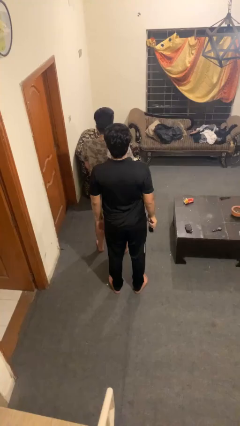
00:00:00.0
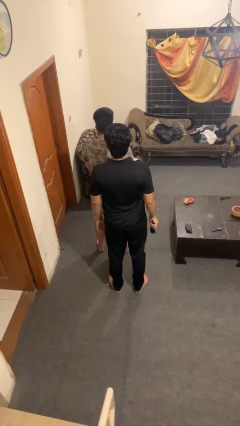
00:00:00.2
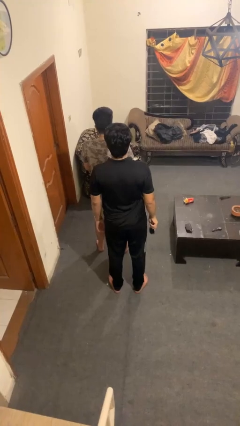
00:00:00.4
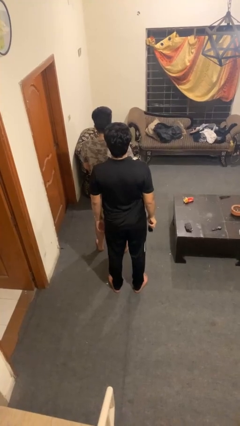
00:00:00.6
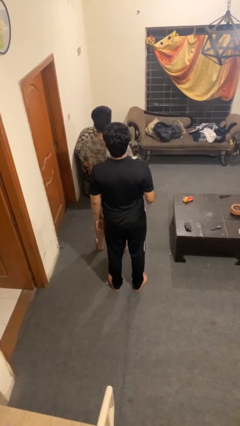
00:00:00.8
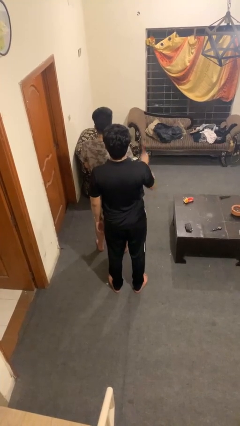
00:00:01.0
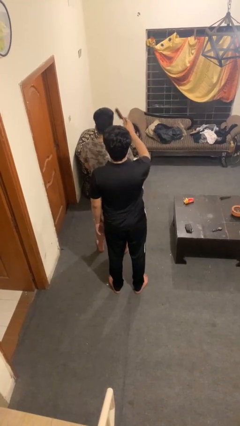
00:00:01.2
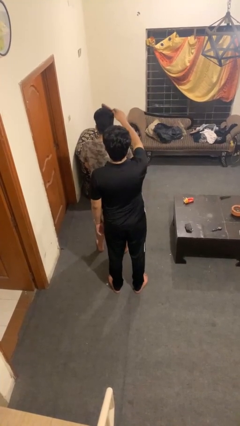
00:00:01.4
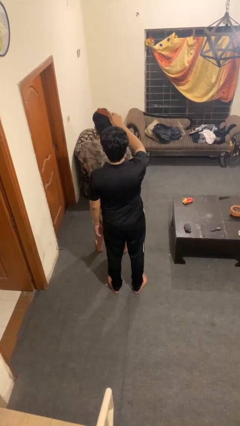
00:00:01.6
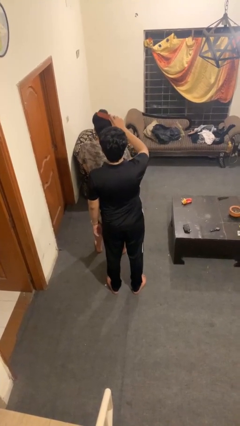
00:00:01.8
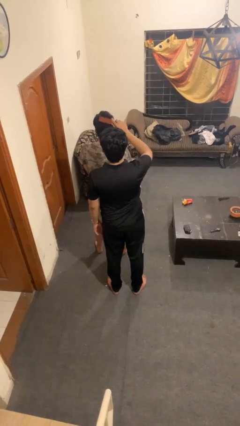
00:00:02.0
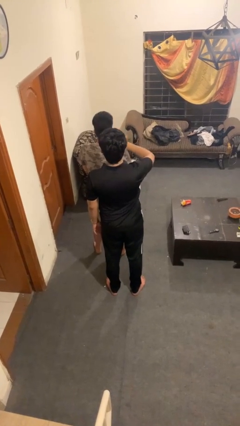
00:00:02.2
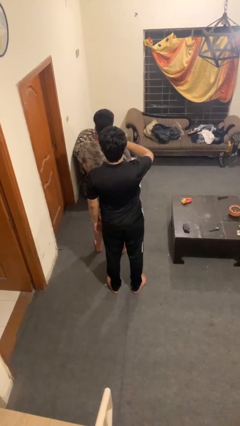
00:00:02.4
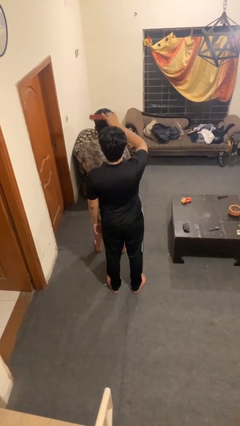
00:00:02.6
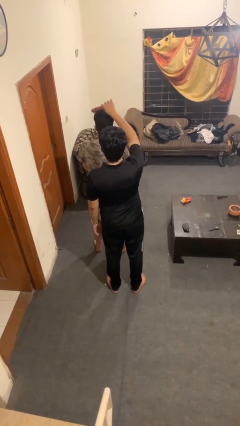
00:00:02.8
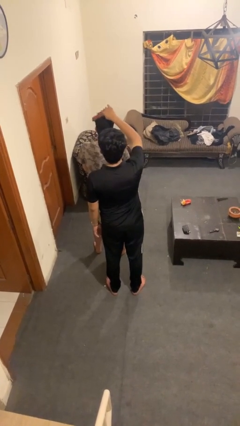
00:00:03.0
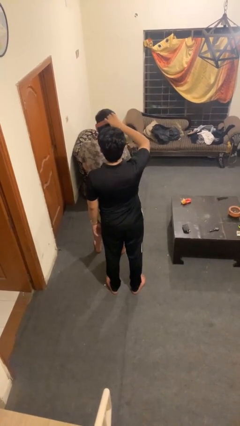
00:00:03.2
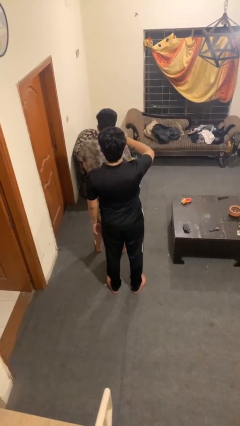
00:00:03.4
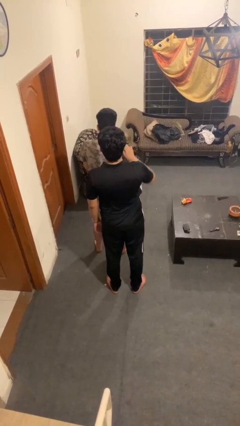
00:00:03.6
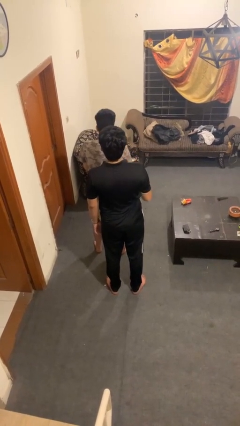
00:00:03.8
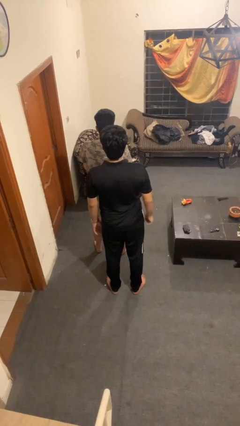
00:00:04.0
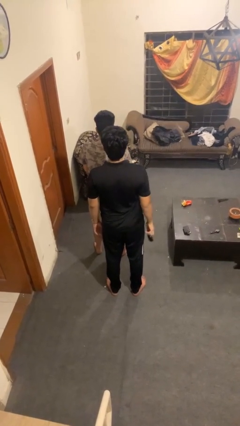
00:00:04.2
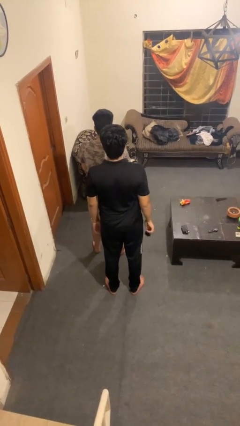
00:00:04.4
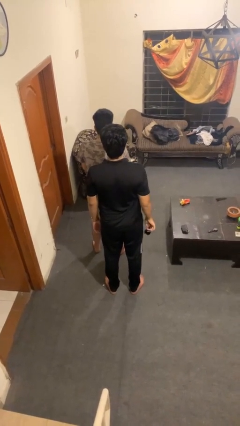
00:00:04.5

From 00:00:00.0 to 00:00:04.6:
person brushes hair of person

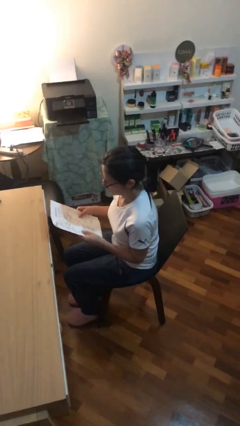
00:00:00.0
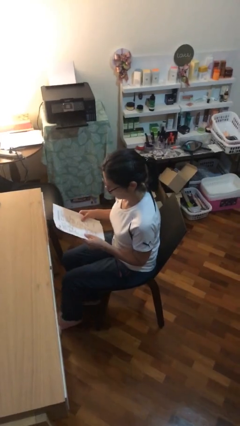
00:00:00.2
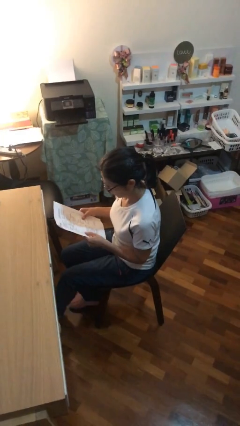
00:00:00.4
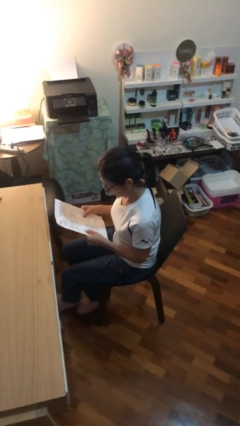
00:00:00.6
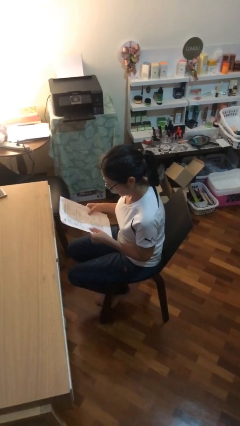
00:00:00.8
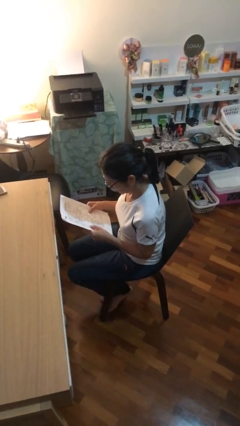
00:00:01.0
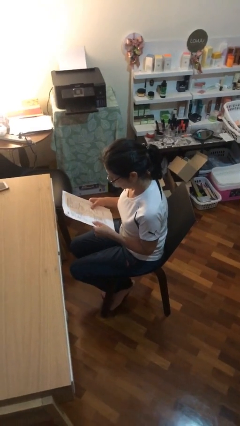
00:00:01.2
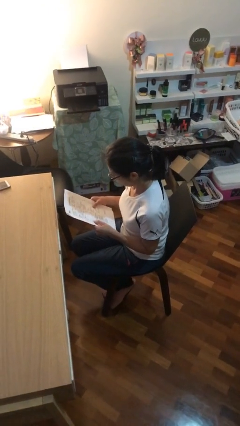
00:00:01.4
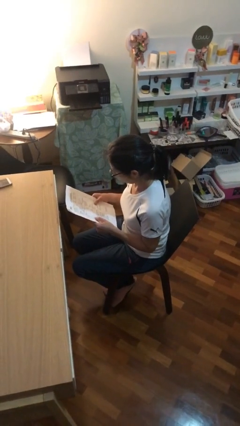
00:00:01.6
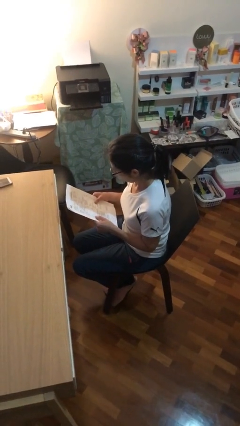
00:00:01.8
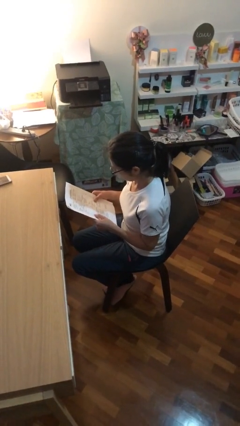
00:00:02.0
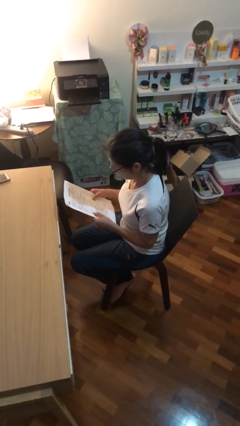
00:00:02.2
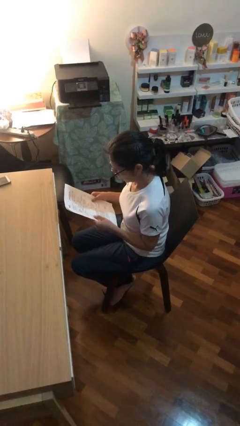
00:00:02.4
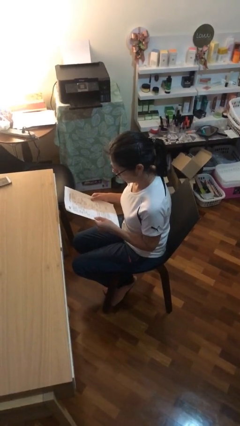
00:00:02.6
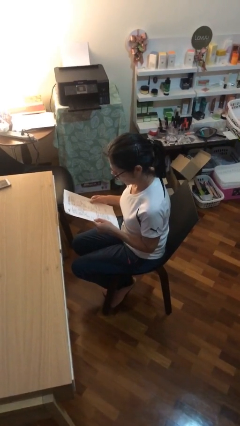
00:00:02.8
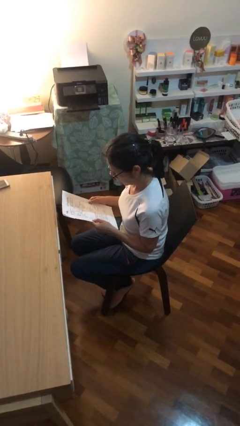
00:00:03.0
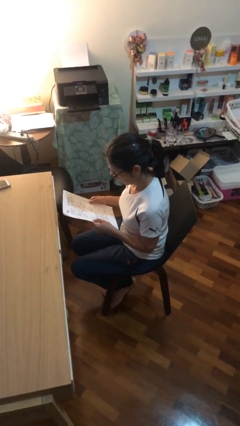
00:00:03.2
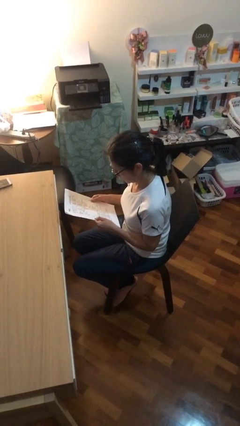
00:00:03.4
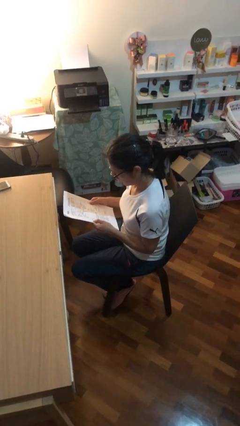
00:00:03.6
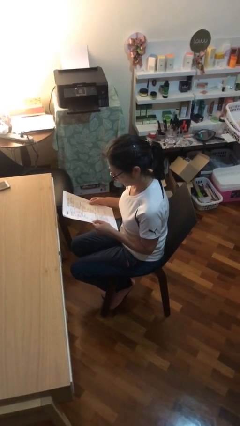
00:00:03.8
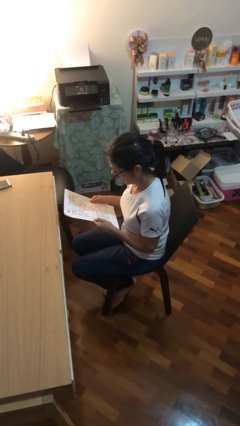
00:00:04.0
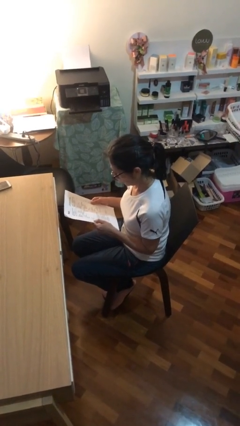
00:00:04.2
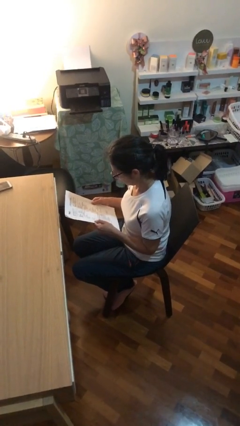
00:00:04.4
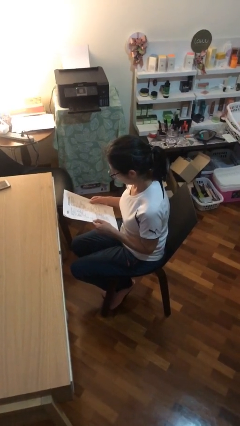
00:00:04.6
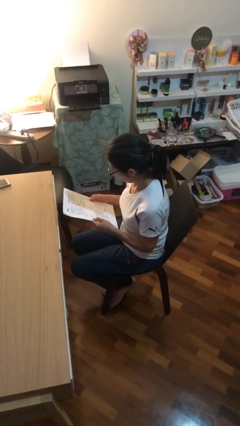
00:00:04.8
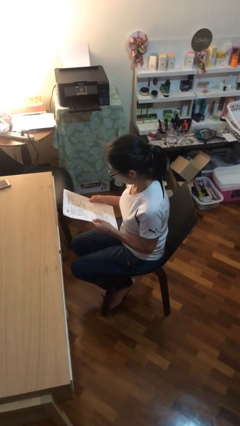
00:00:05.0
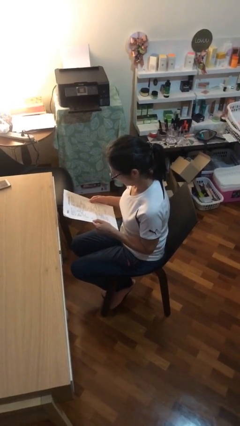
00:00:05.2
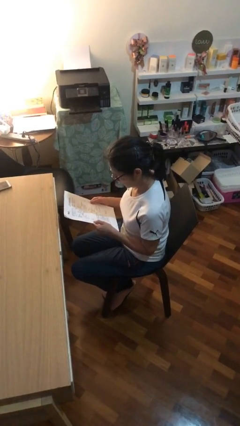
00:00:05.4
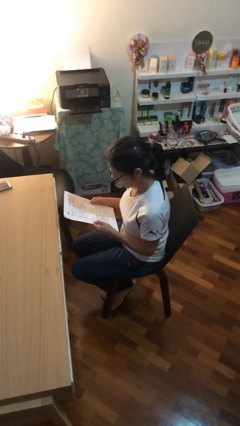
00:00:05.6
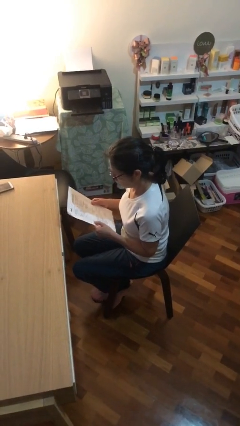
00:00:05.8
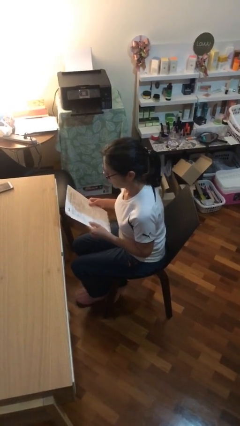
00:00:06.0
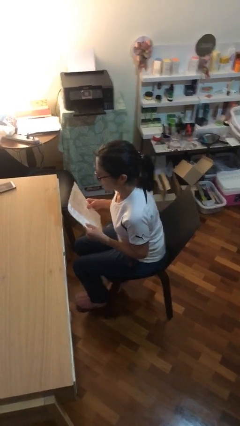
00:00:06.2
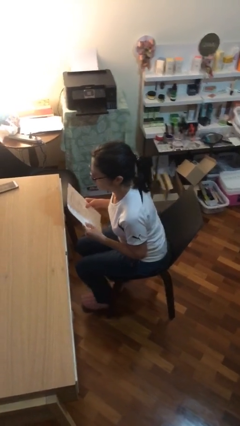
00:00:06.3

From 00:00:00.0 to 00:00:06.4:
person reads document

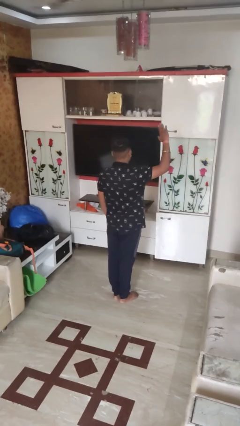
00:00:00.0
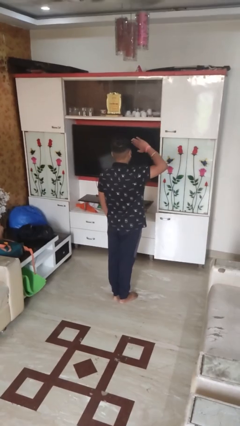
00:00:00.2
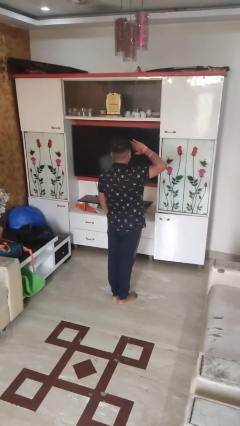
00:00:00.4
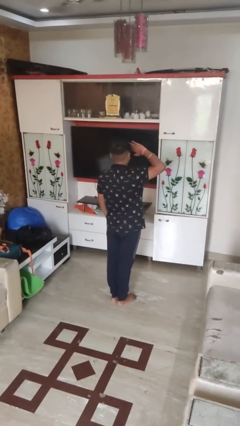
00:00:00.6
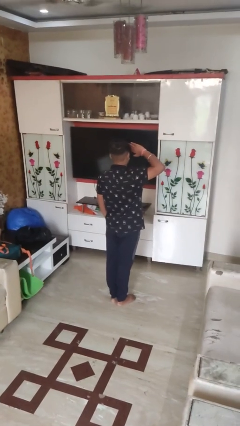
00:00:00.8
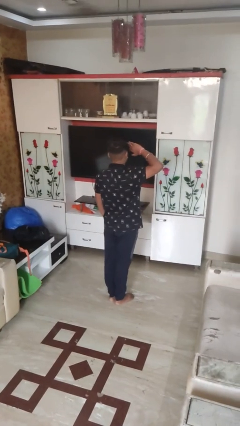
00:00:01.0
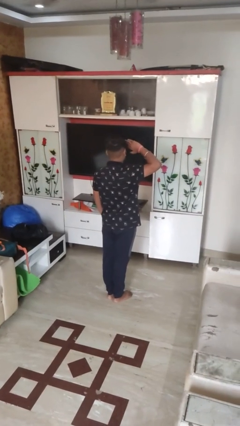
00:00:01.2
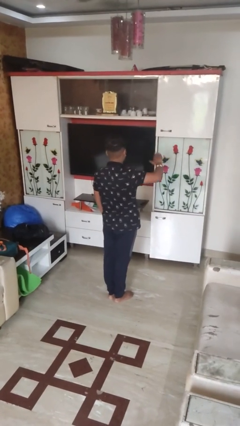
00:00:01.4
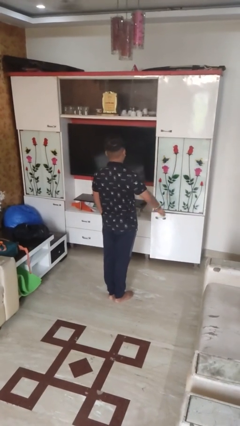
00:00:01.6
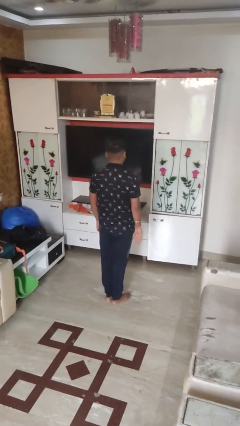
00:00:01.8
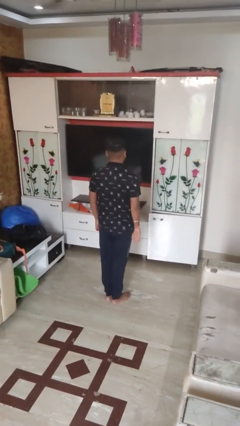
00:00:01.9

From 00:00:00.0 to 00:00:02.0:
person salutes

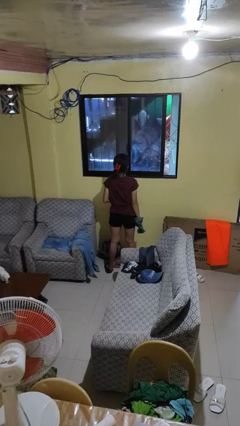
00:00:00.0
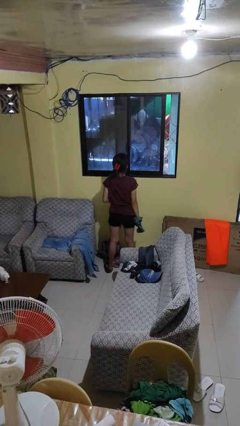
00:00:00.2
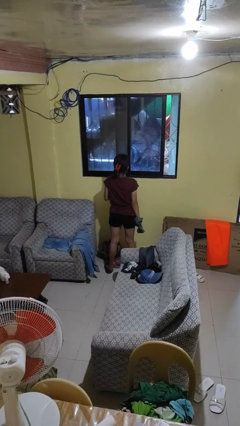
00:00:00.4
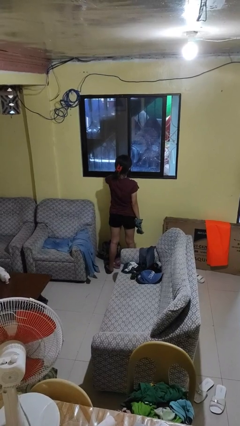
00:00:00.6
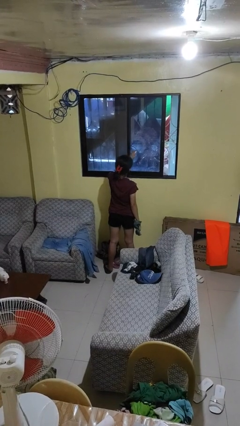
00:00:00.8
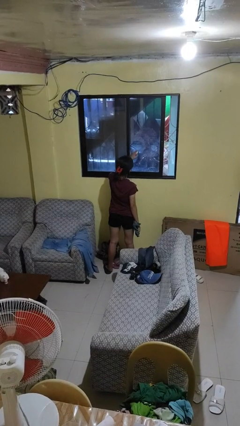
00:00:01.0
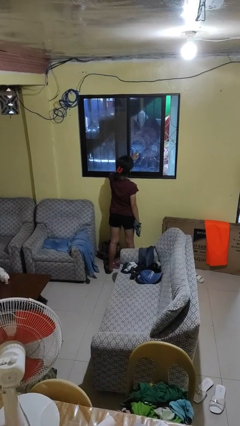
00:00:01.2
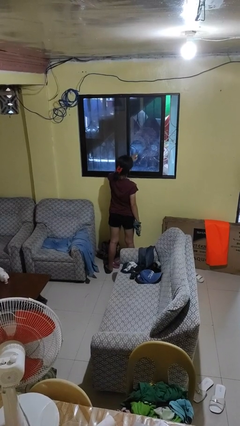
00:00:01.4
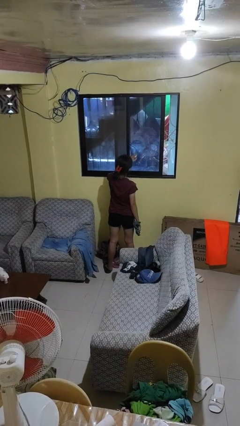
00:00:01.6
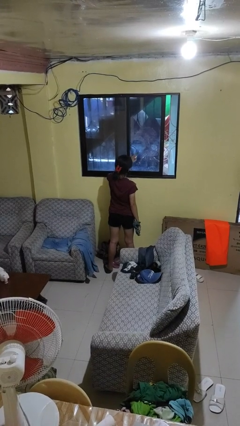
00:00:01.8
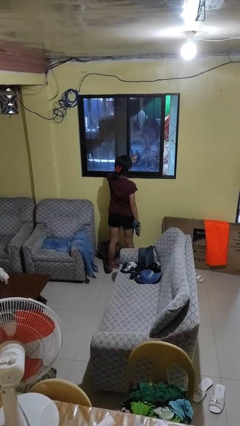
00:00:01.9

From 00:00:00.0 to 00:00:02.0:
person sprays from bottle

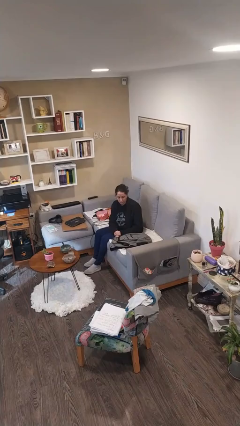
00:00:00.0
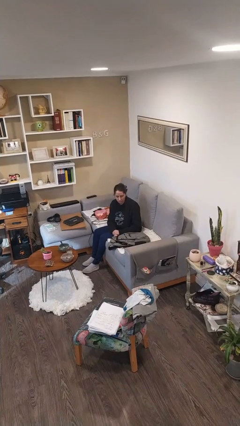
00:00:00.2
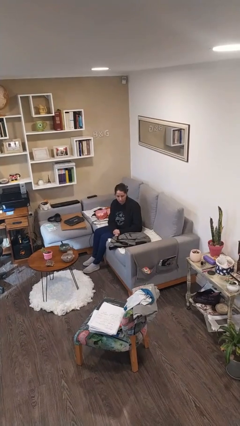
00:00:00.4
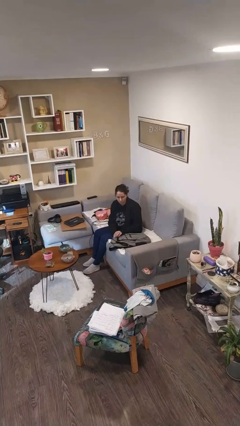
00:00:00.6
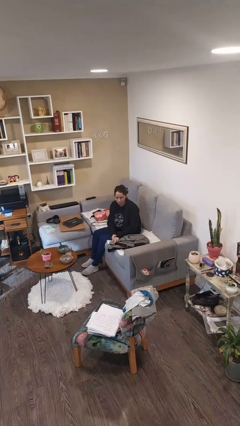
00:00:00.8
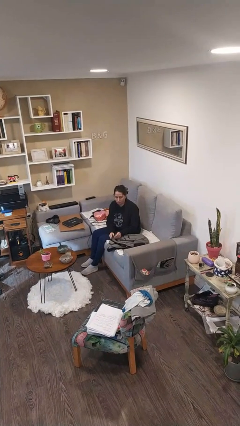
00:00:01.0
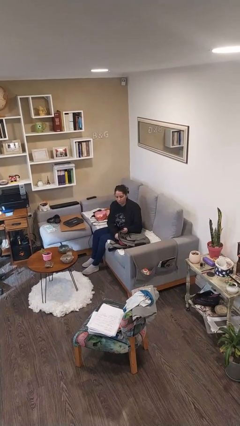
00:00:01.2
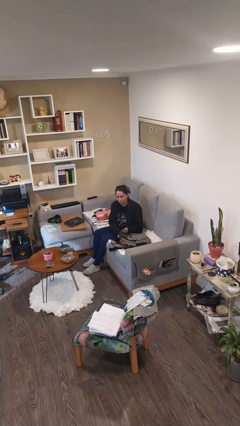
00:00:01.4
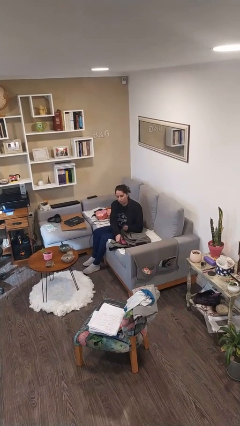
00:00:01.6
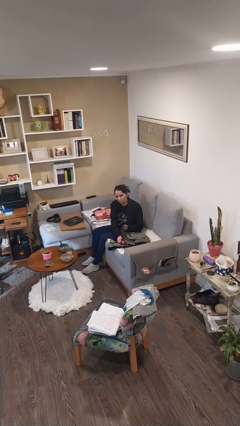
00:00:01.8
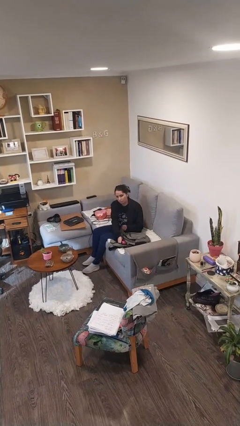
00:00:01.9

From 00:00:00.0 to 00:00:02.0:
person searches in backpack

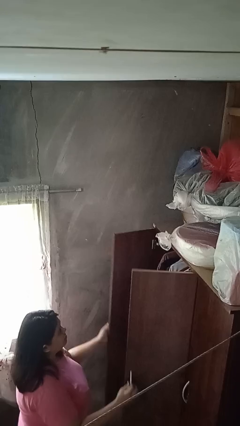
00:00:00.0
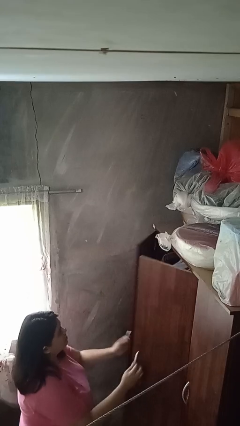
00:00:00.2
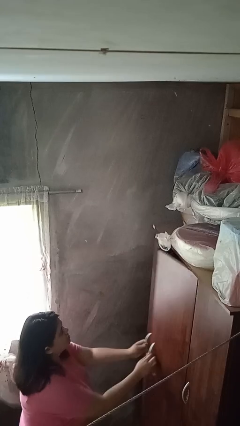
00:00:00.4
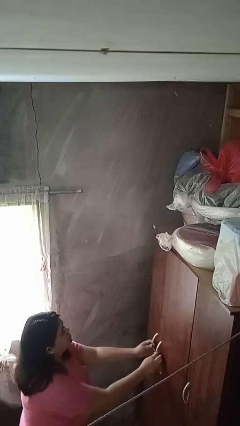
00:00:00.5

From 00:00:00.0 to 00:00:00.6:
person closes closet door
